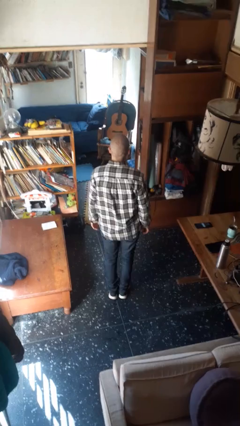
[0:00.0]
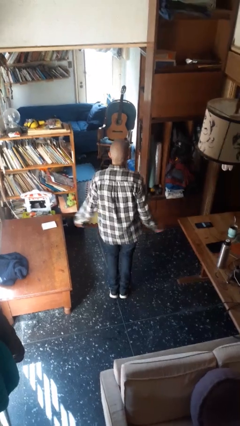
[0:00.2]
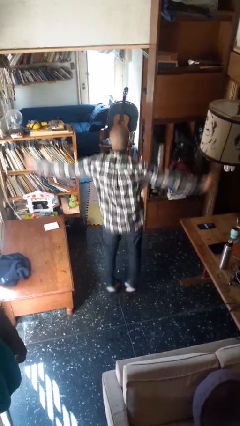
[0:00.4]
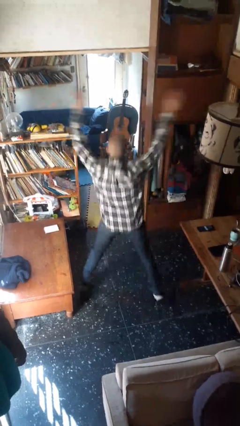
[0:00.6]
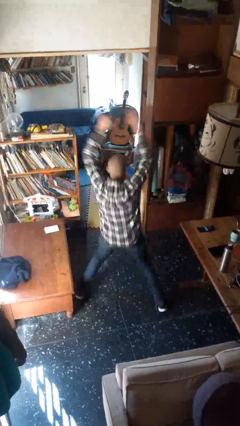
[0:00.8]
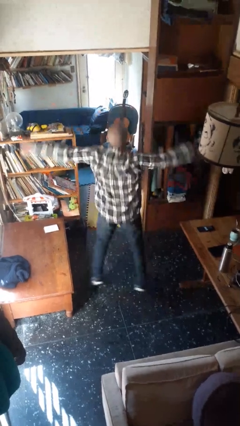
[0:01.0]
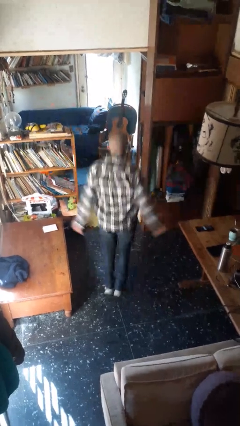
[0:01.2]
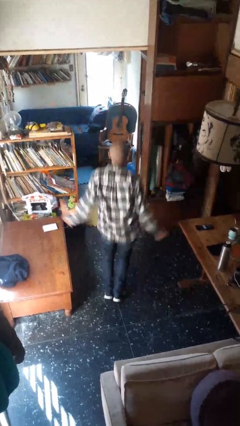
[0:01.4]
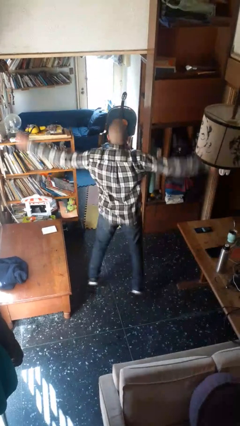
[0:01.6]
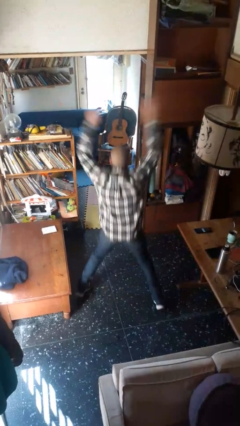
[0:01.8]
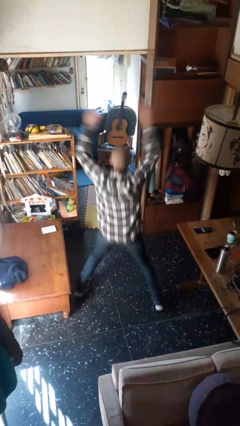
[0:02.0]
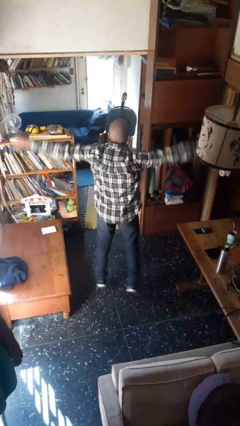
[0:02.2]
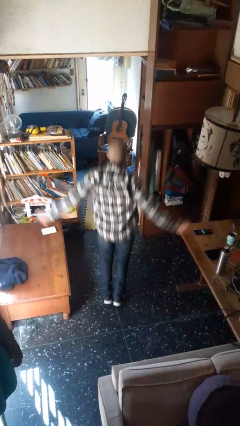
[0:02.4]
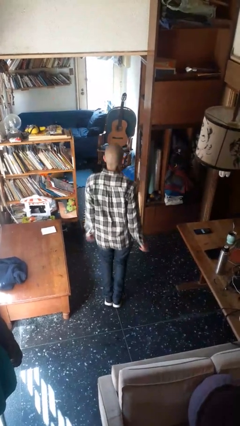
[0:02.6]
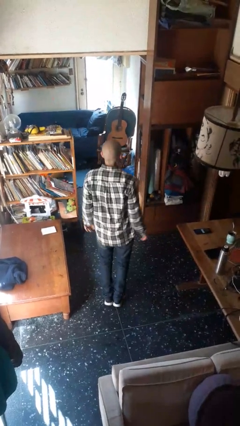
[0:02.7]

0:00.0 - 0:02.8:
person exercises with jumping jacks

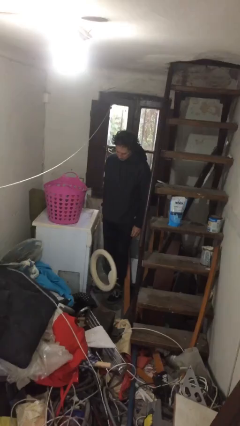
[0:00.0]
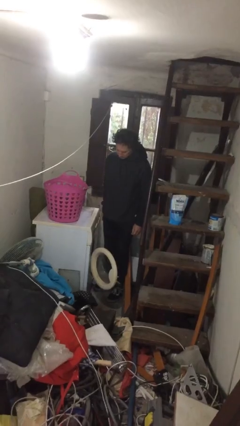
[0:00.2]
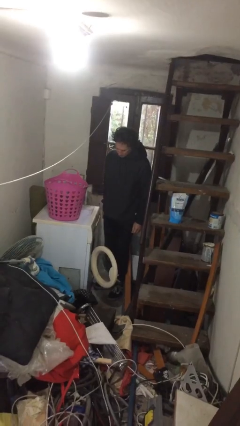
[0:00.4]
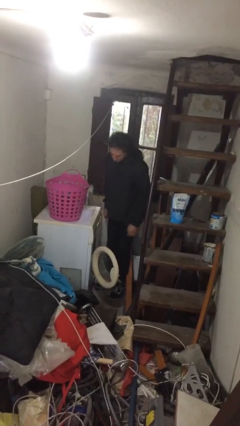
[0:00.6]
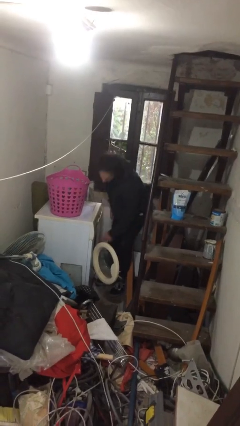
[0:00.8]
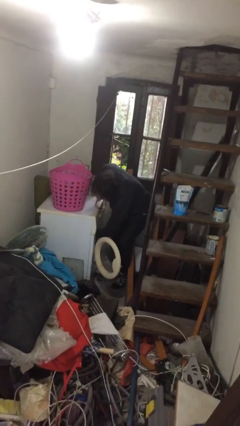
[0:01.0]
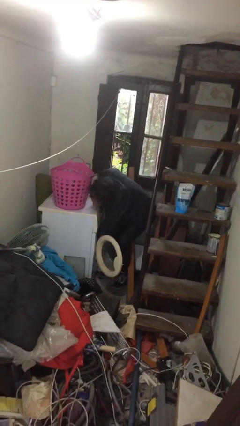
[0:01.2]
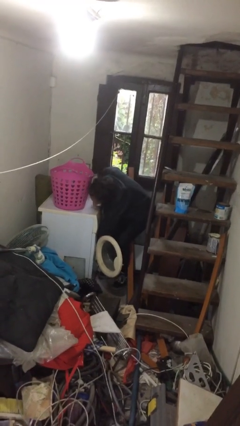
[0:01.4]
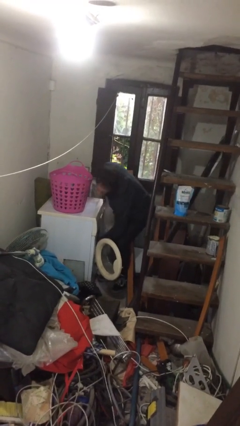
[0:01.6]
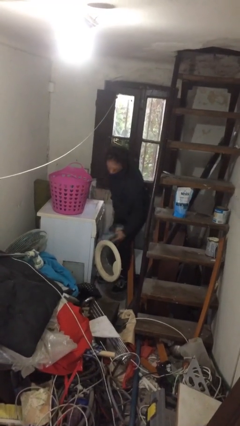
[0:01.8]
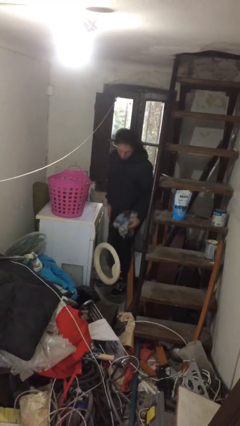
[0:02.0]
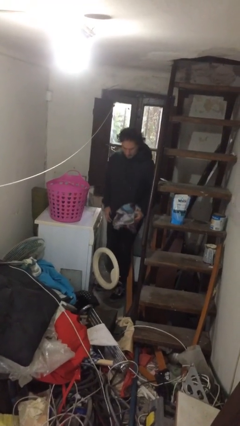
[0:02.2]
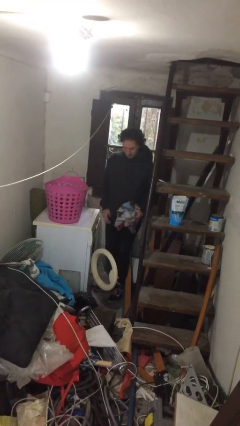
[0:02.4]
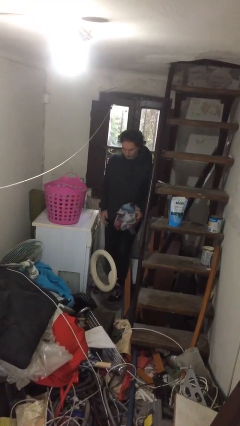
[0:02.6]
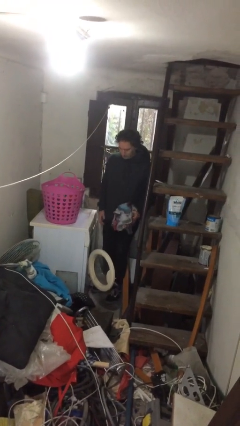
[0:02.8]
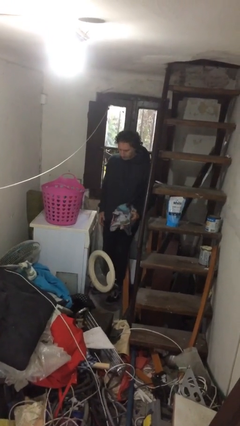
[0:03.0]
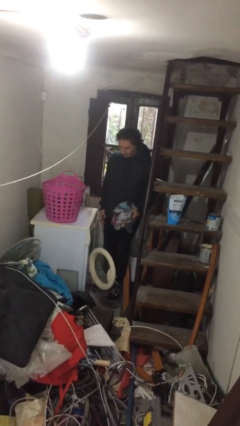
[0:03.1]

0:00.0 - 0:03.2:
person unloads clotheswasher

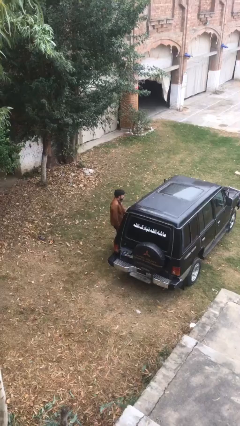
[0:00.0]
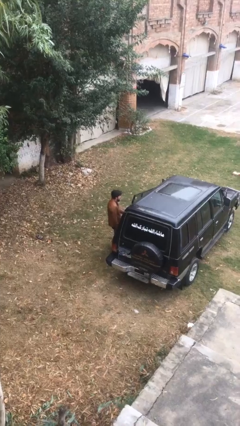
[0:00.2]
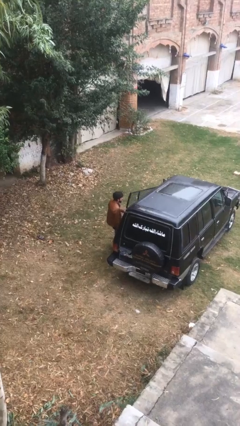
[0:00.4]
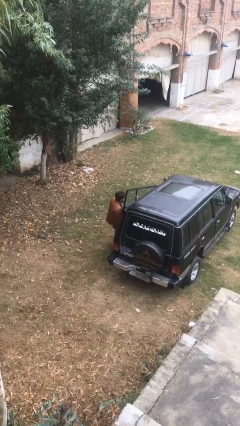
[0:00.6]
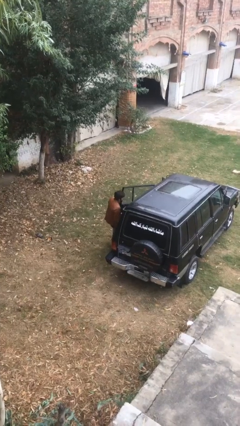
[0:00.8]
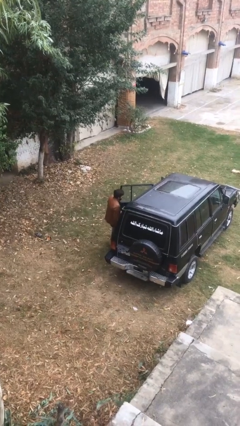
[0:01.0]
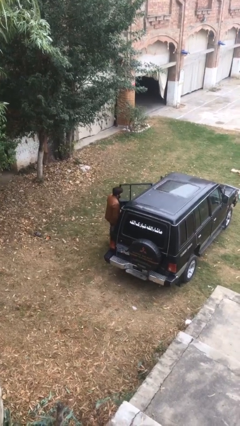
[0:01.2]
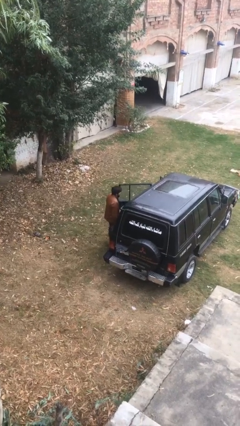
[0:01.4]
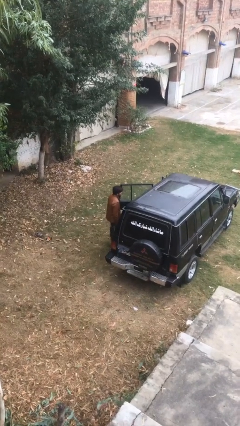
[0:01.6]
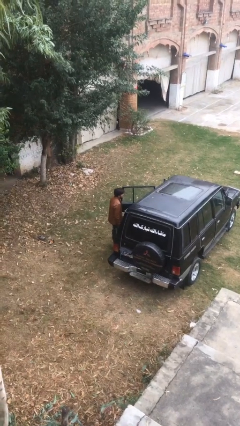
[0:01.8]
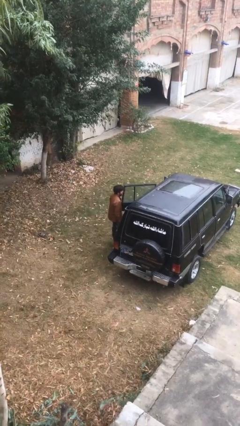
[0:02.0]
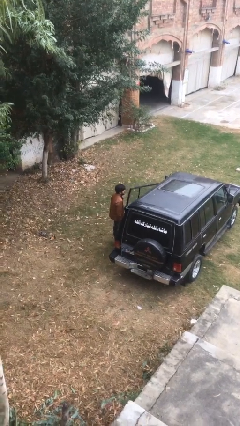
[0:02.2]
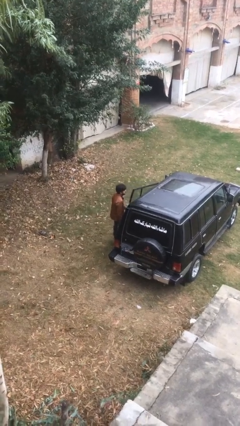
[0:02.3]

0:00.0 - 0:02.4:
person opens car door

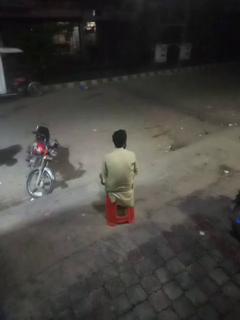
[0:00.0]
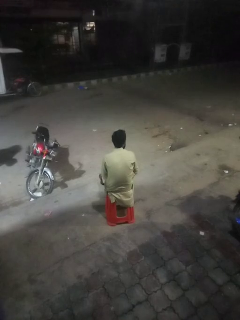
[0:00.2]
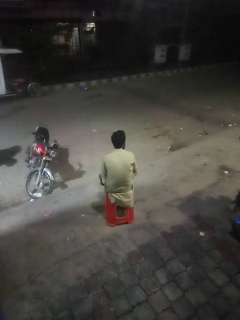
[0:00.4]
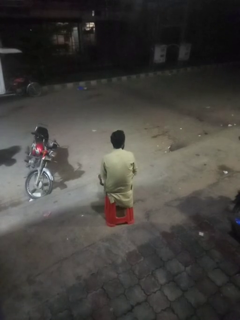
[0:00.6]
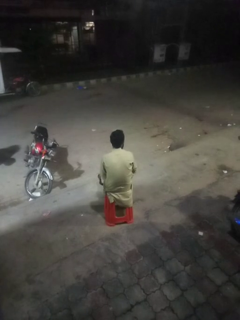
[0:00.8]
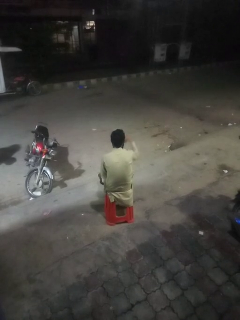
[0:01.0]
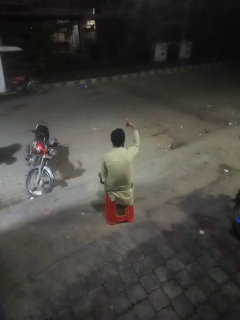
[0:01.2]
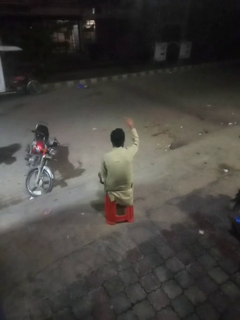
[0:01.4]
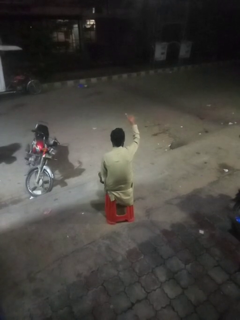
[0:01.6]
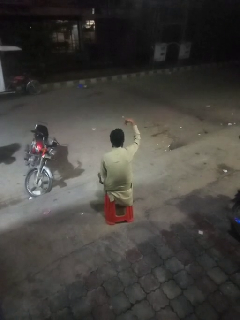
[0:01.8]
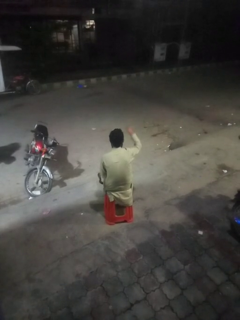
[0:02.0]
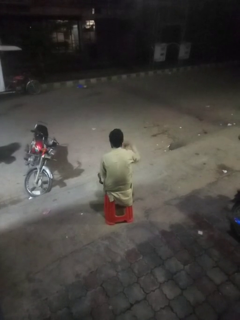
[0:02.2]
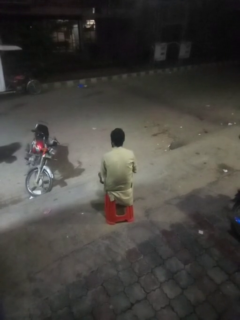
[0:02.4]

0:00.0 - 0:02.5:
person gestures hang loose

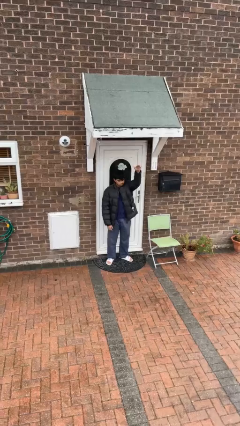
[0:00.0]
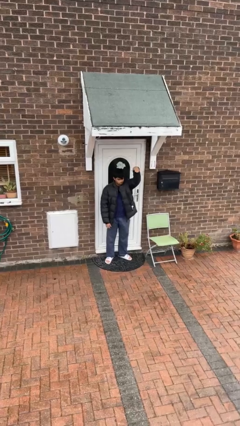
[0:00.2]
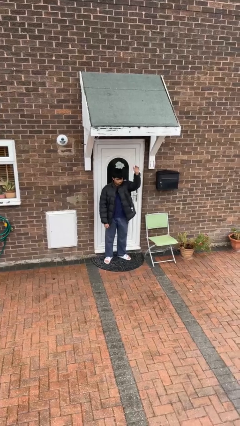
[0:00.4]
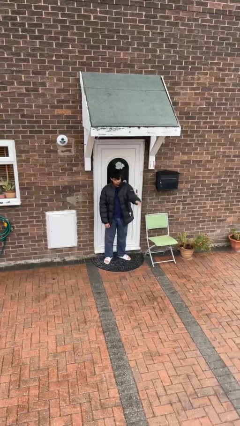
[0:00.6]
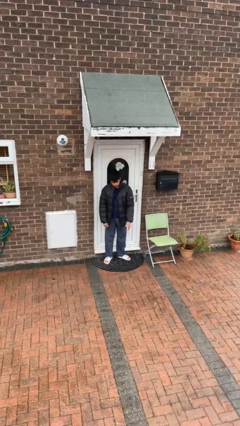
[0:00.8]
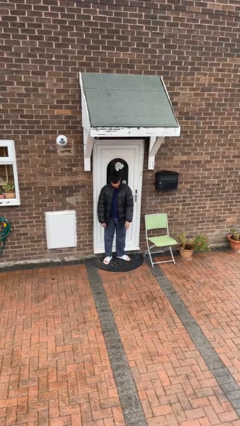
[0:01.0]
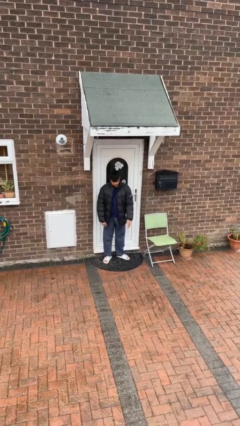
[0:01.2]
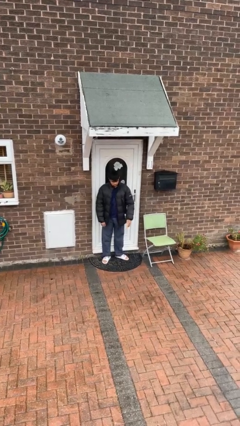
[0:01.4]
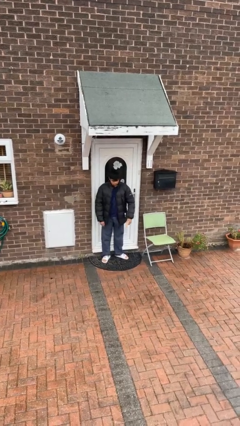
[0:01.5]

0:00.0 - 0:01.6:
person gestures swipe down

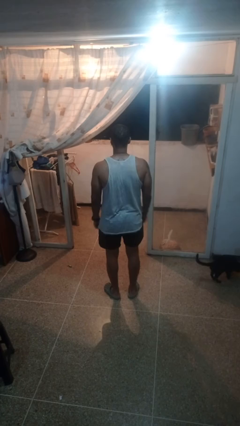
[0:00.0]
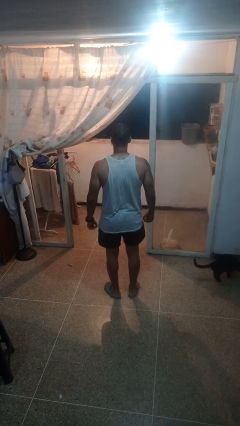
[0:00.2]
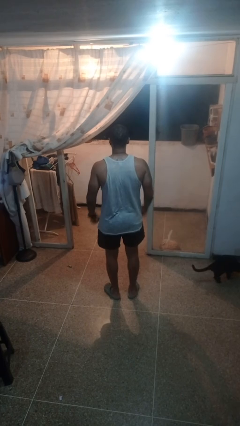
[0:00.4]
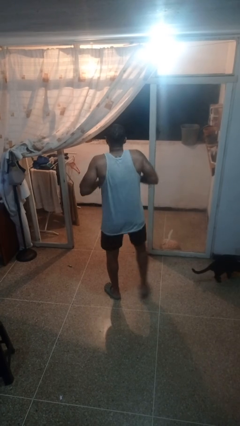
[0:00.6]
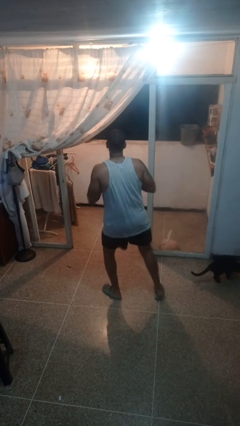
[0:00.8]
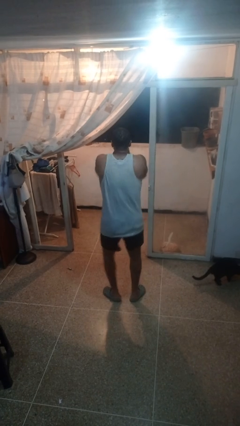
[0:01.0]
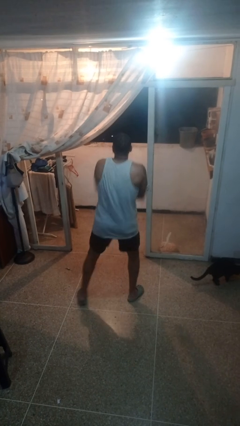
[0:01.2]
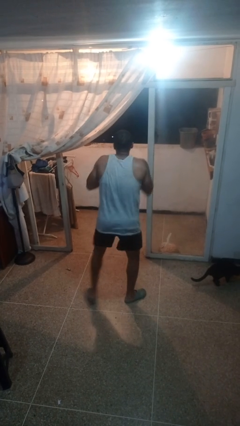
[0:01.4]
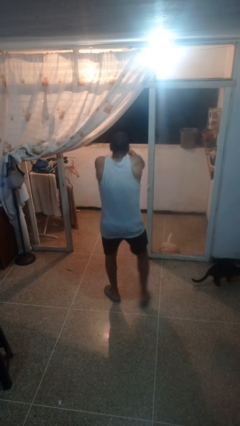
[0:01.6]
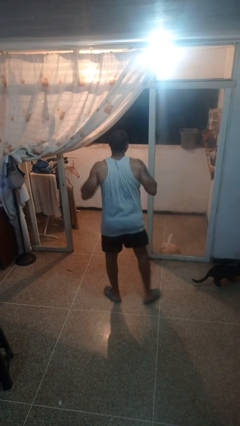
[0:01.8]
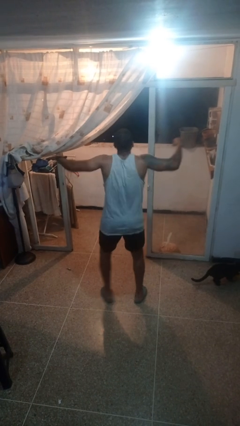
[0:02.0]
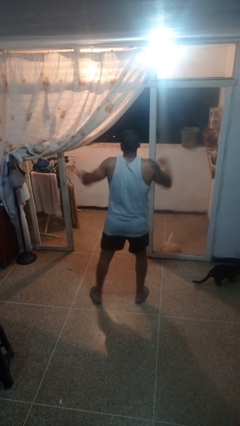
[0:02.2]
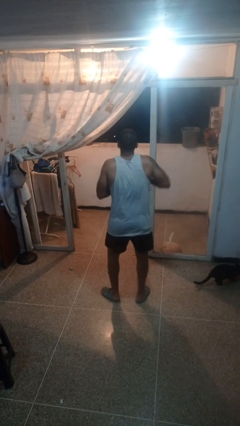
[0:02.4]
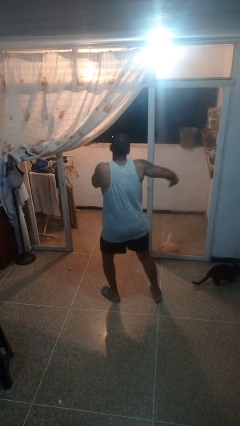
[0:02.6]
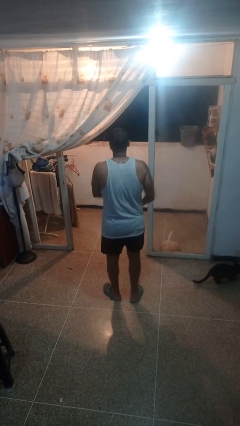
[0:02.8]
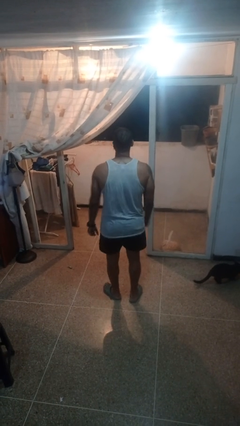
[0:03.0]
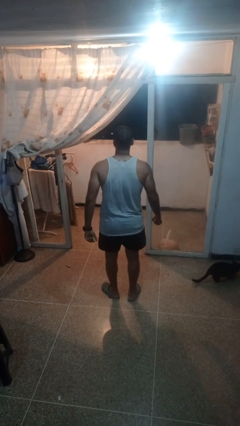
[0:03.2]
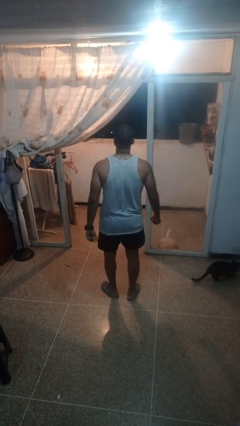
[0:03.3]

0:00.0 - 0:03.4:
person dances in place

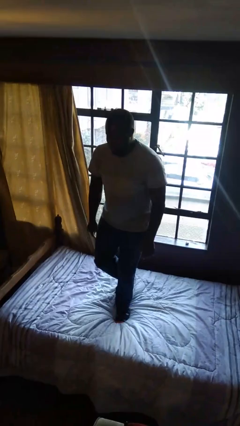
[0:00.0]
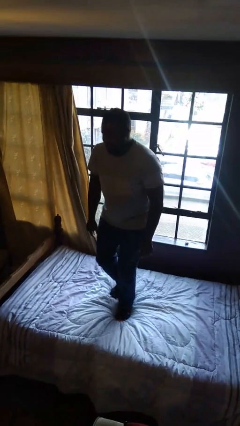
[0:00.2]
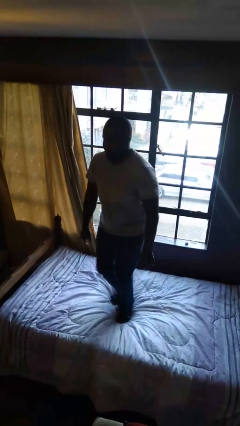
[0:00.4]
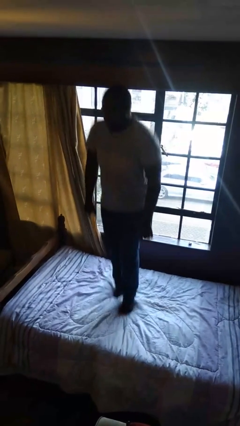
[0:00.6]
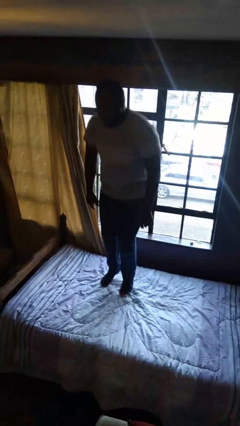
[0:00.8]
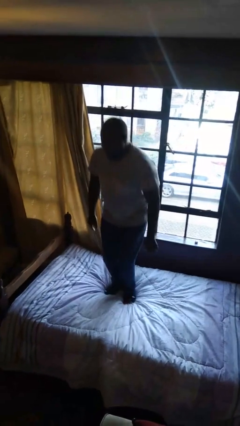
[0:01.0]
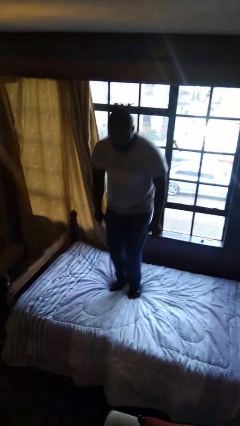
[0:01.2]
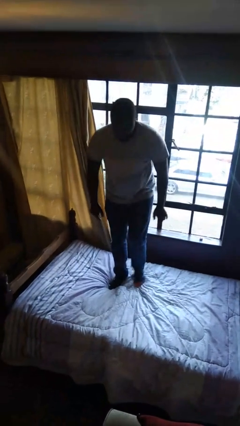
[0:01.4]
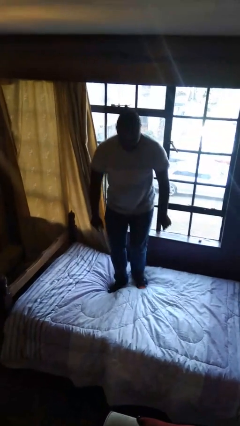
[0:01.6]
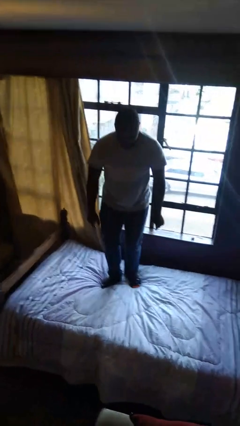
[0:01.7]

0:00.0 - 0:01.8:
person jumps on bed
